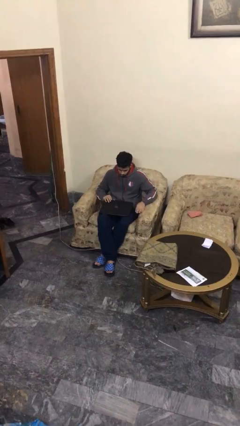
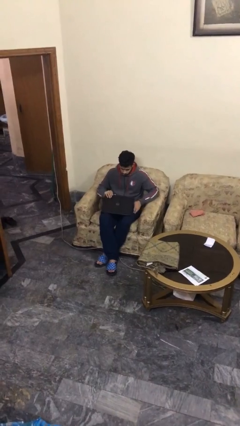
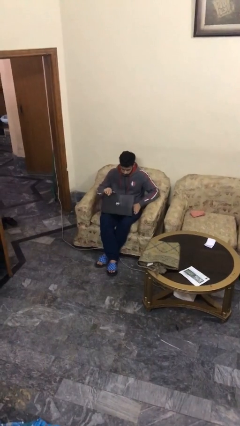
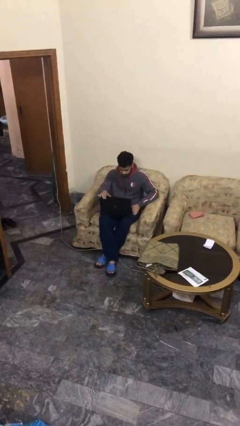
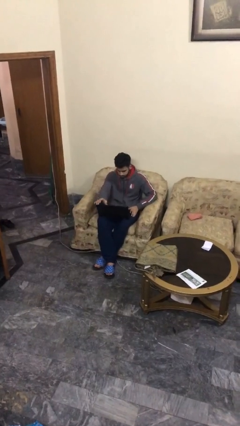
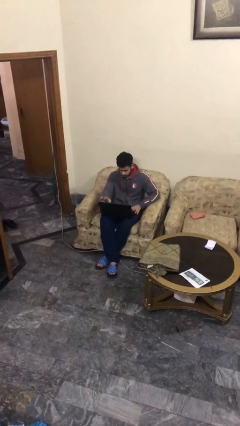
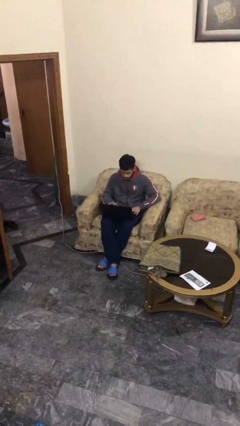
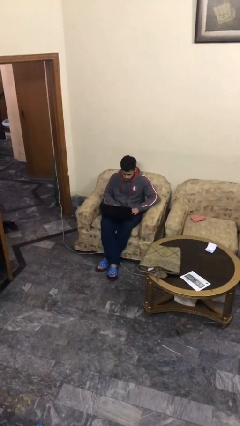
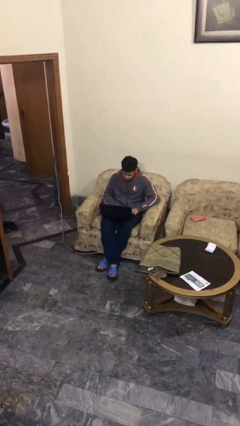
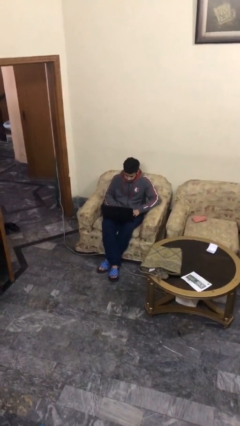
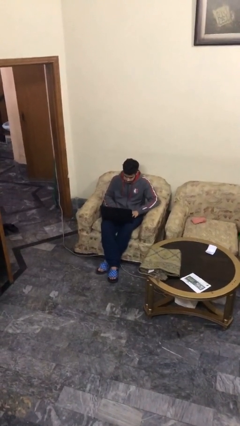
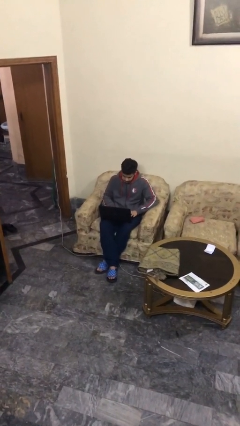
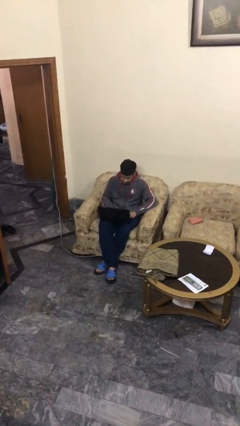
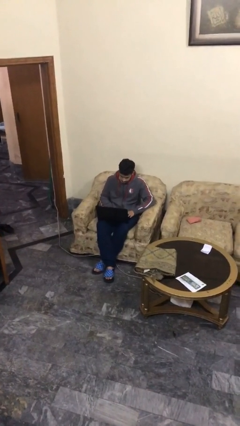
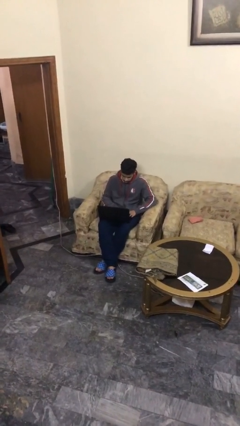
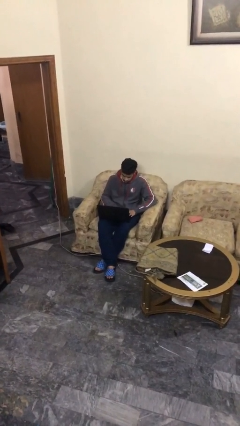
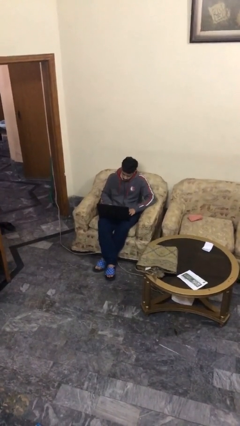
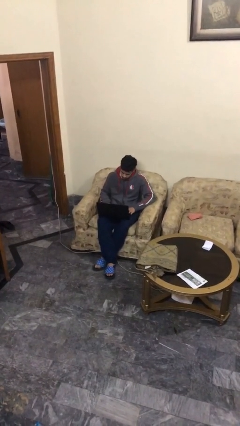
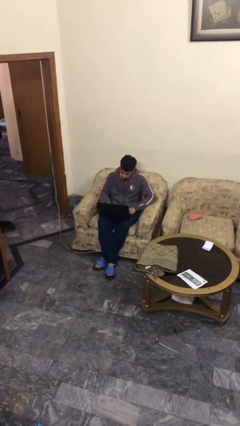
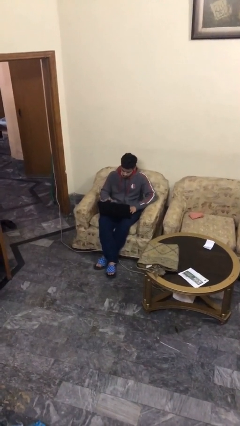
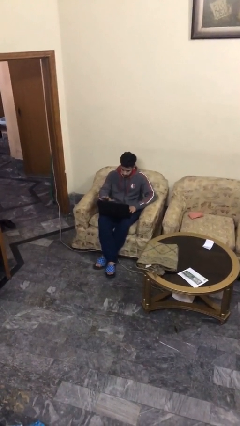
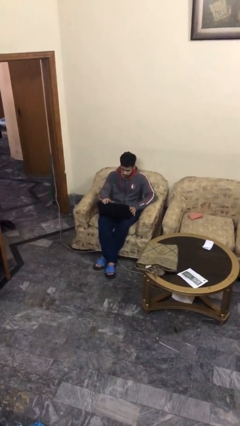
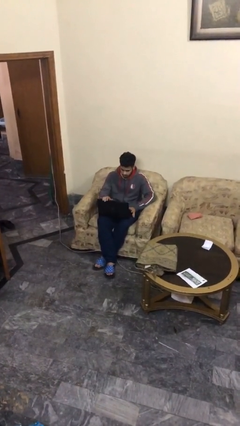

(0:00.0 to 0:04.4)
person interacts with laptop

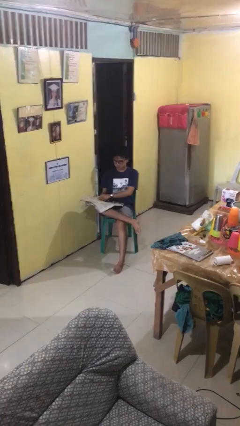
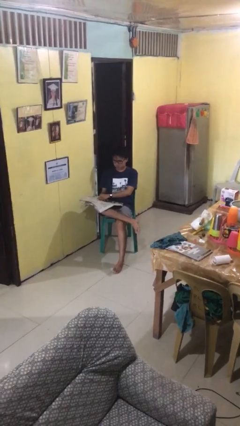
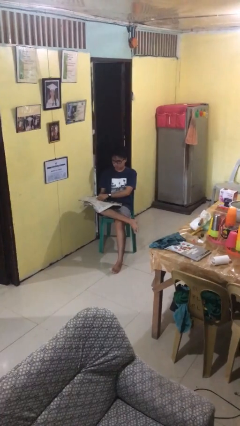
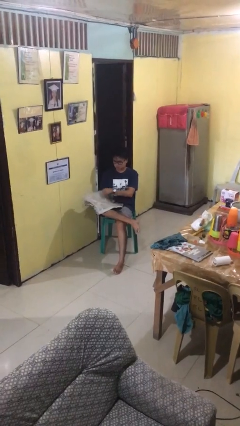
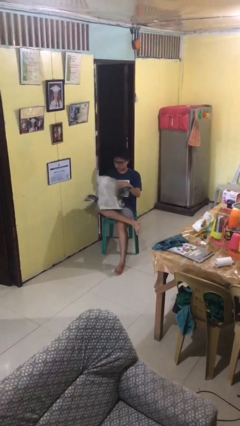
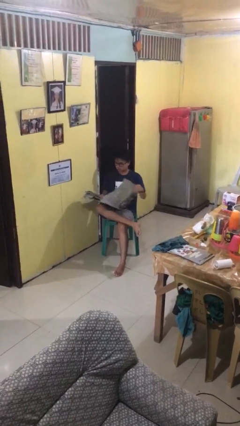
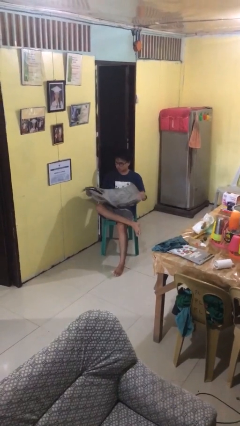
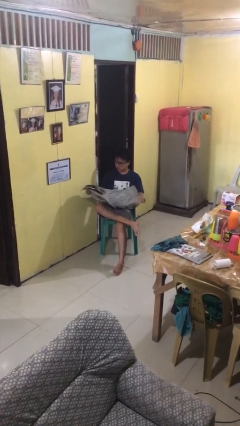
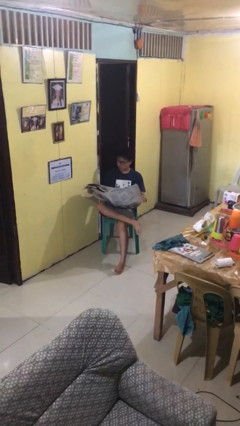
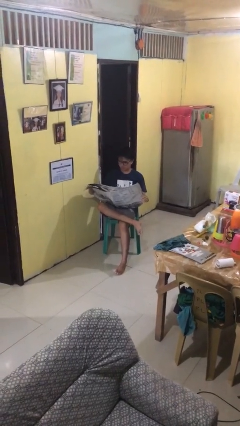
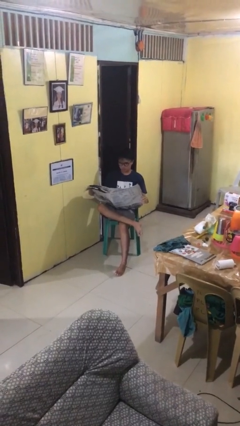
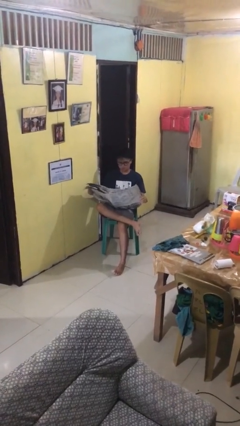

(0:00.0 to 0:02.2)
person reads newspaper

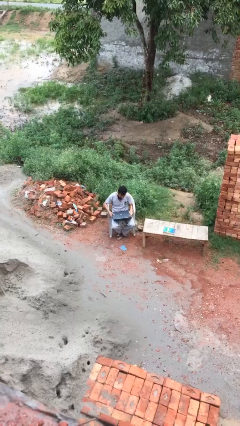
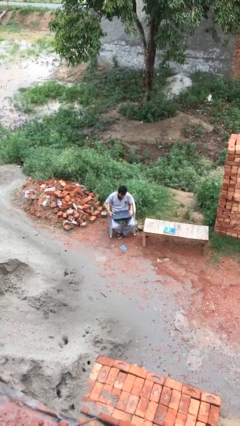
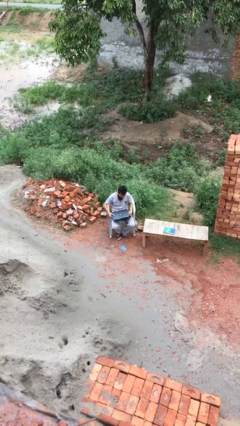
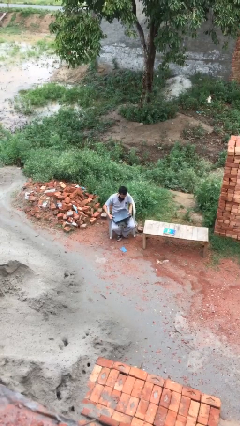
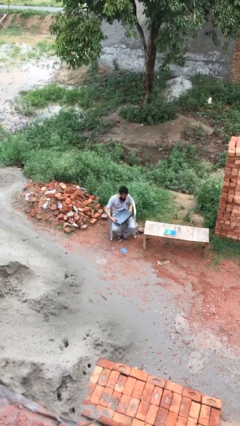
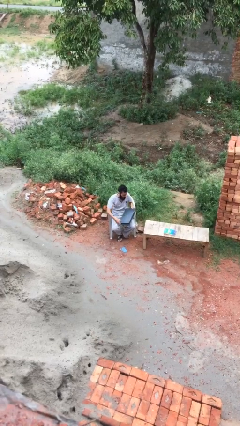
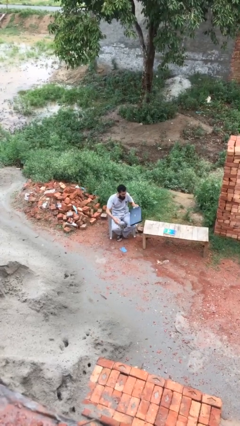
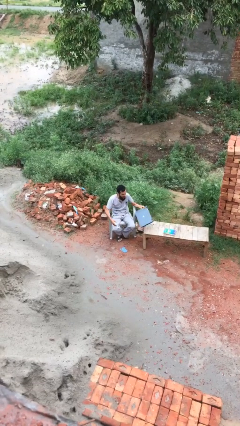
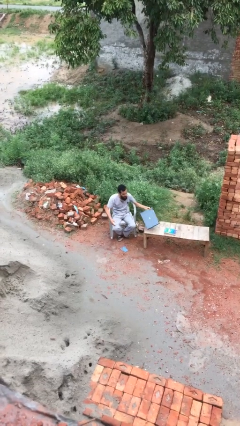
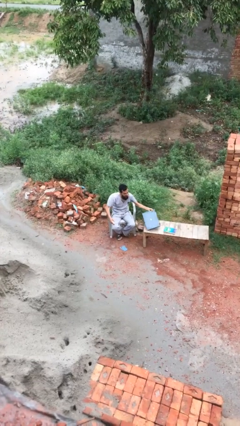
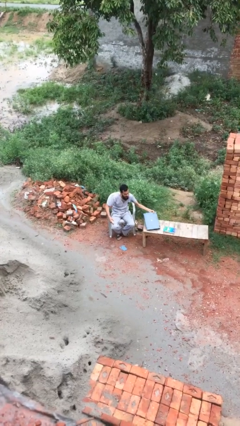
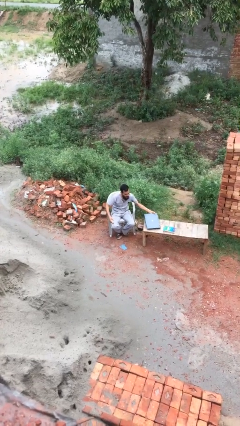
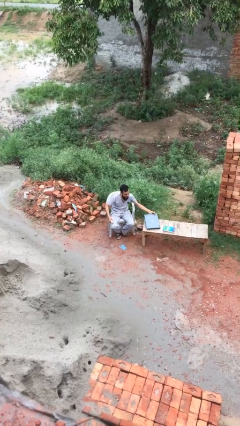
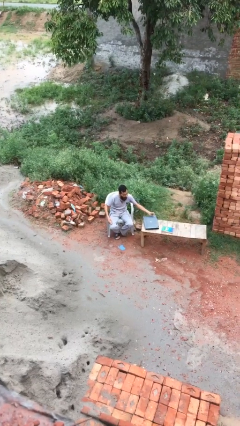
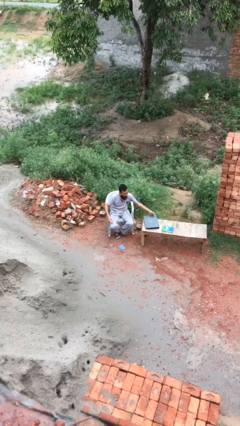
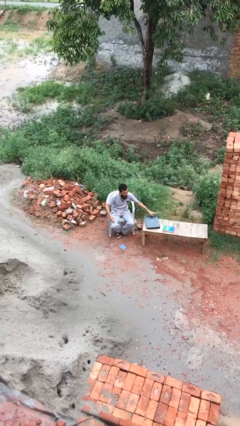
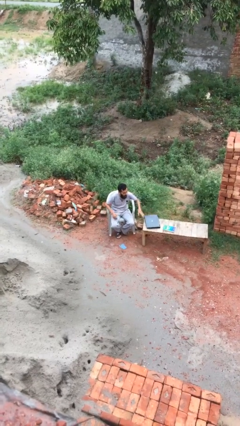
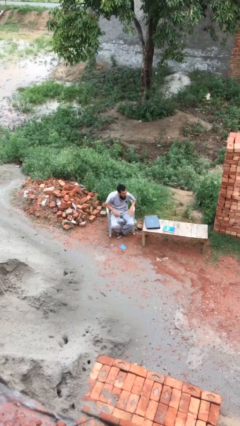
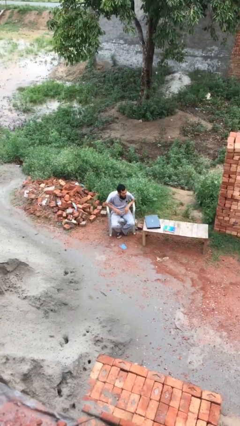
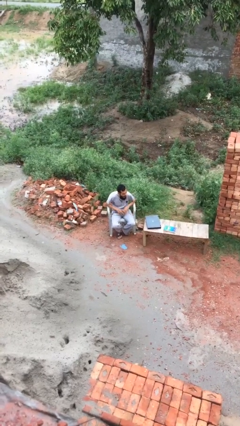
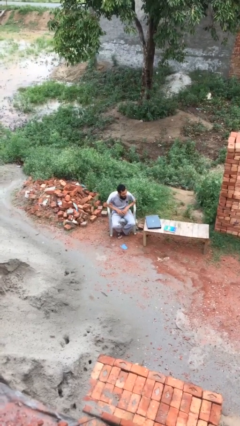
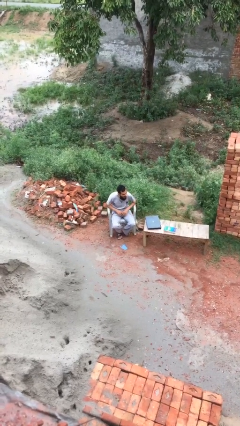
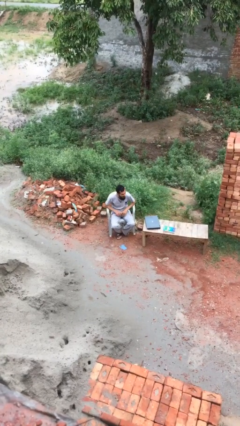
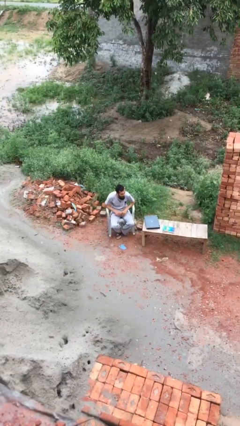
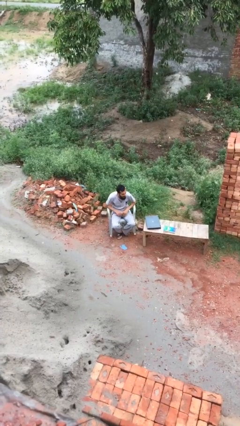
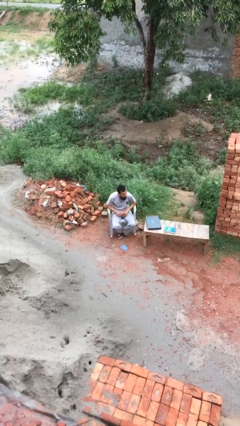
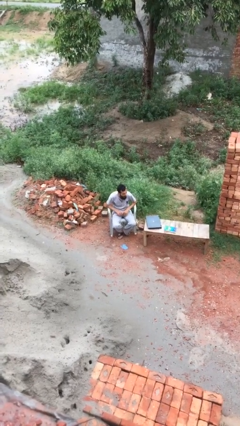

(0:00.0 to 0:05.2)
person puts down object on floor

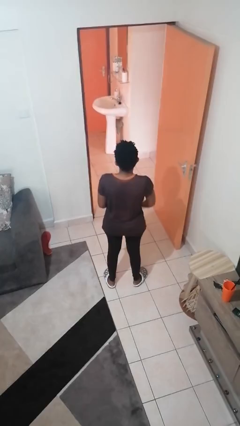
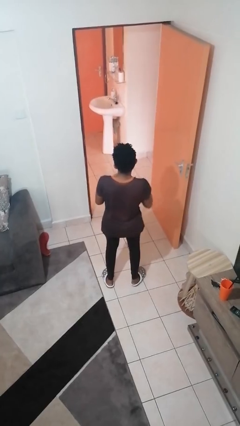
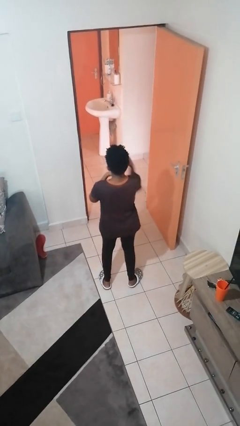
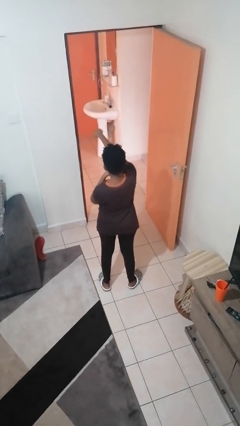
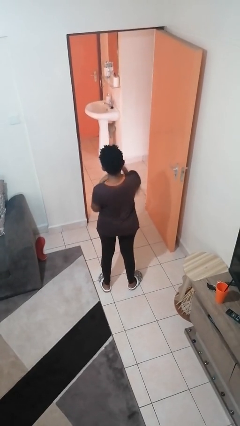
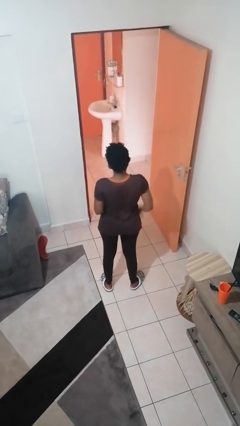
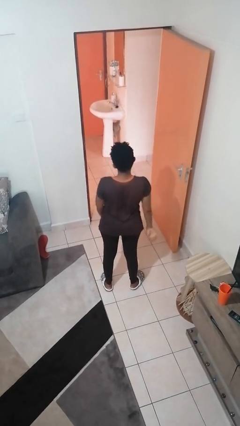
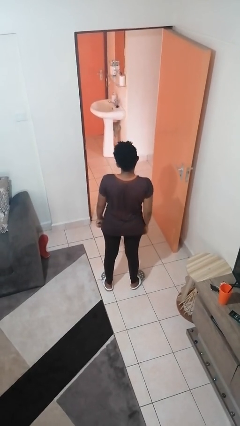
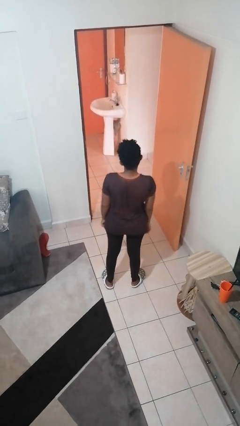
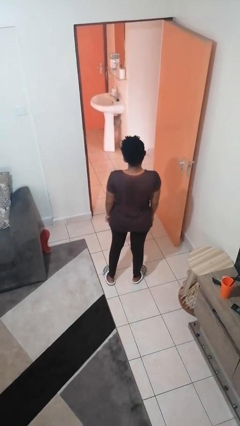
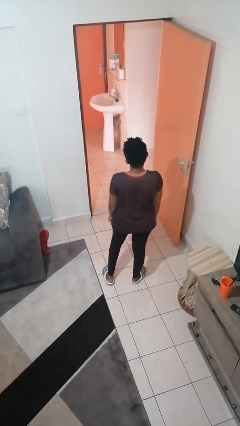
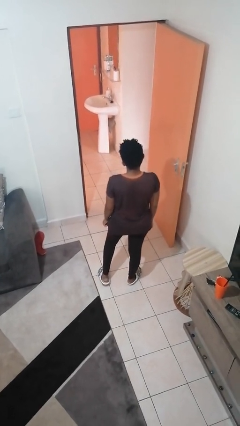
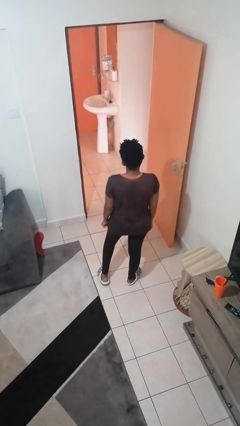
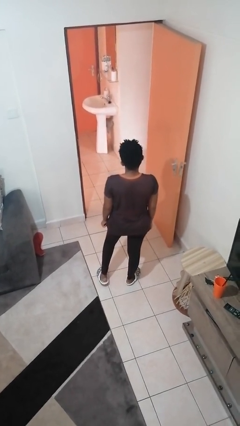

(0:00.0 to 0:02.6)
person punches

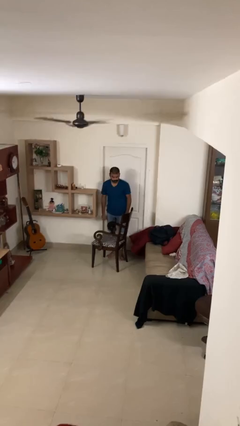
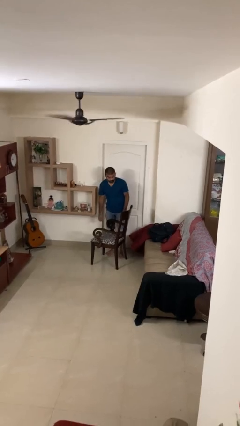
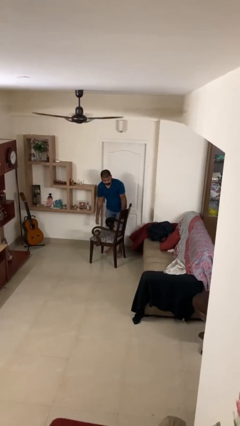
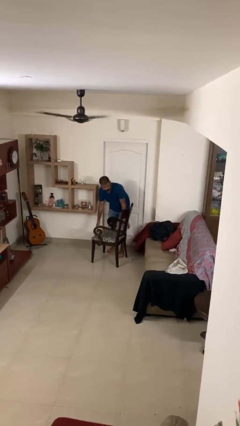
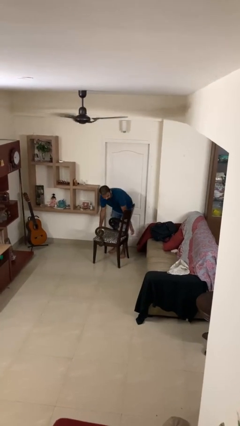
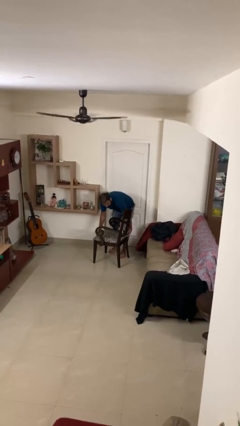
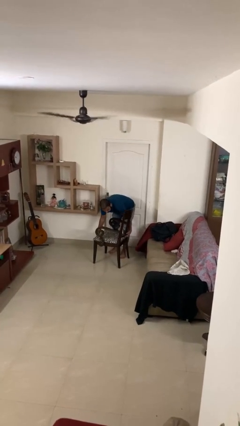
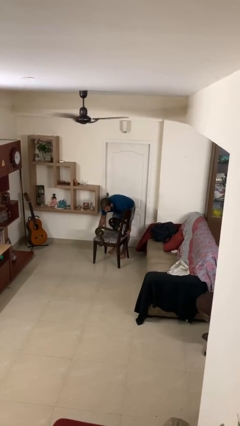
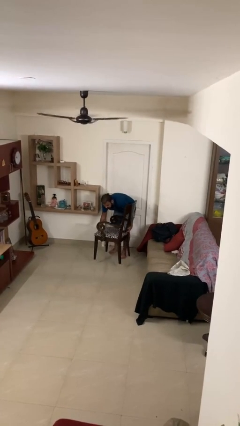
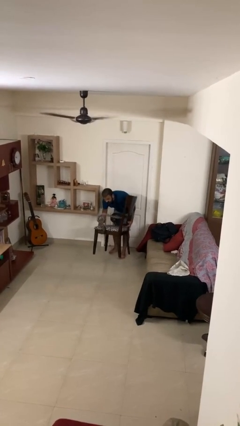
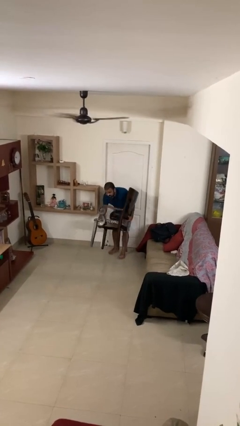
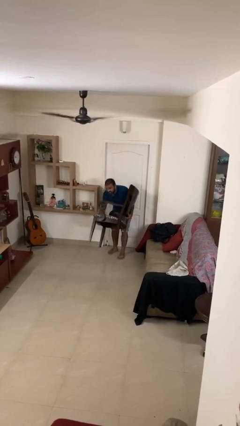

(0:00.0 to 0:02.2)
person picks up object from floor

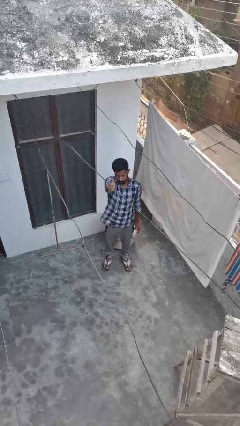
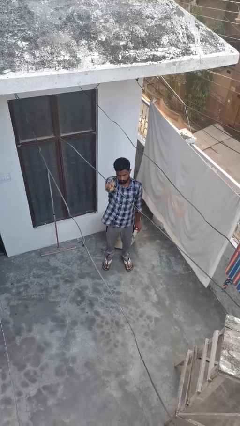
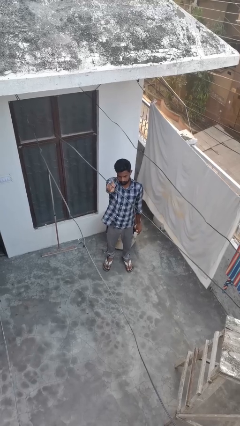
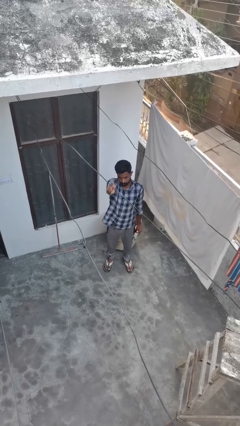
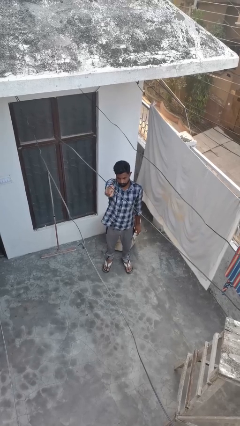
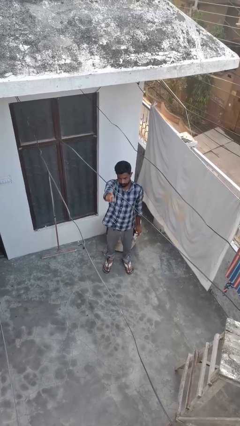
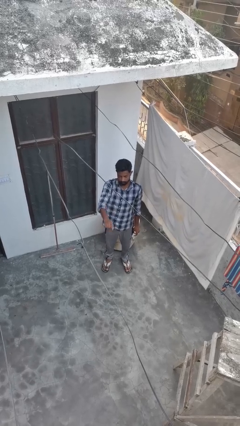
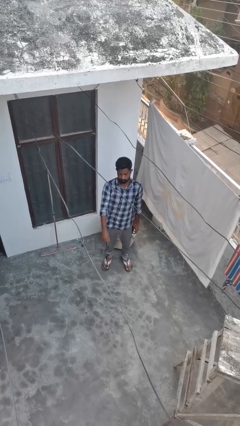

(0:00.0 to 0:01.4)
person gestures number one
